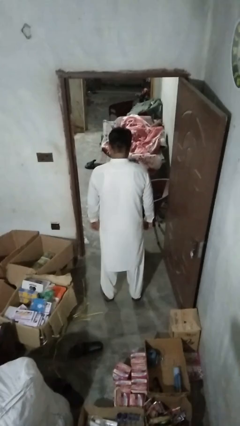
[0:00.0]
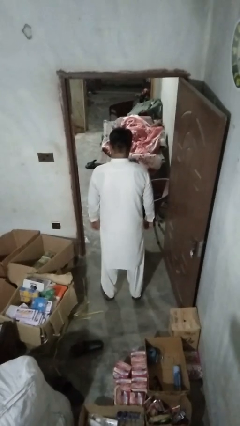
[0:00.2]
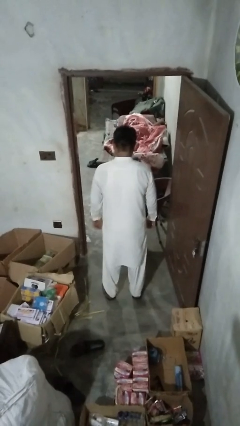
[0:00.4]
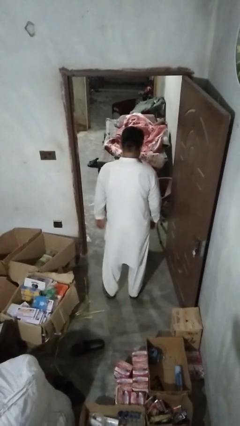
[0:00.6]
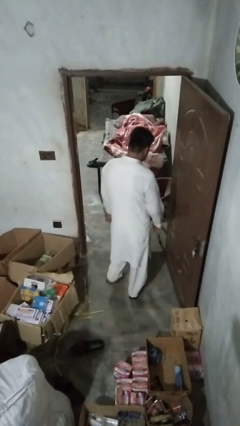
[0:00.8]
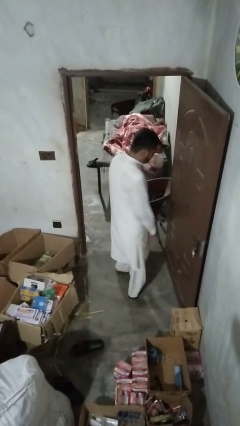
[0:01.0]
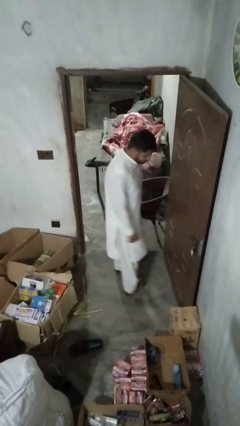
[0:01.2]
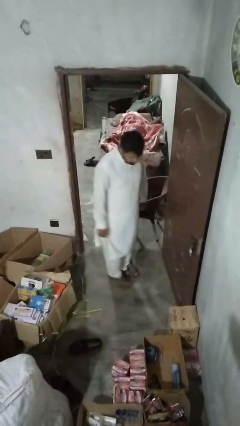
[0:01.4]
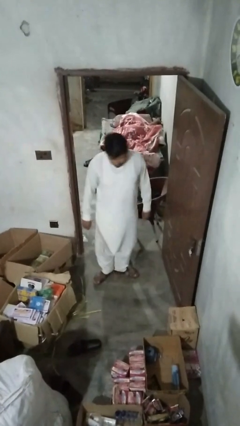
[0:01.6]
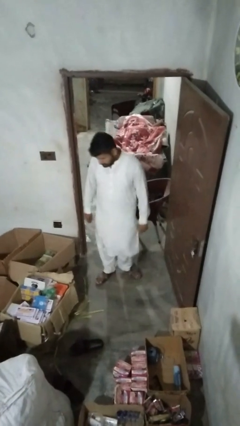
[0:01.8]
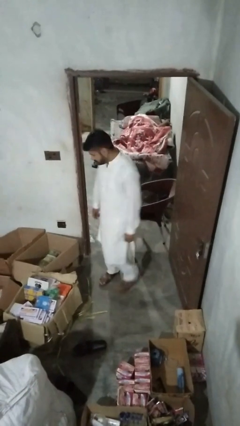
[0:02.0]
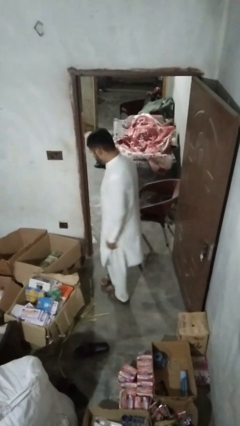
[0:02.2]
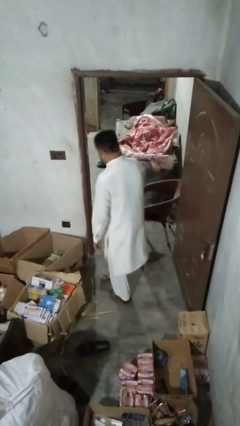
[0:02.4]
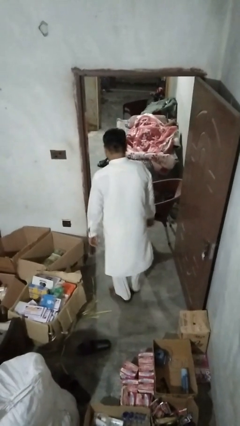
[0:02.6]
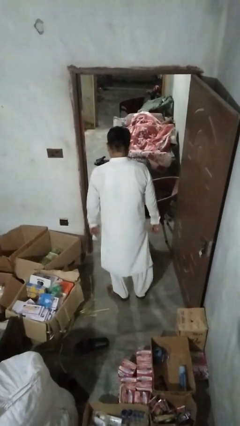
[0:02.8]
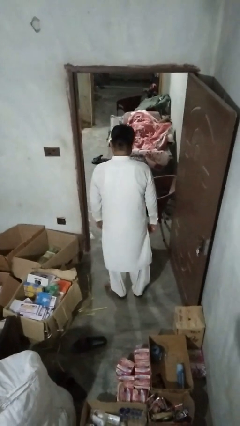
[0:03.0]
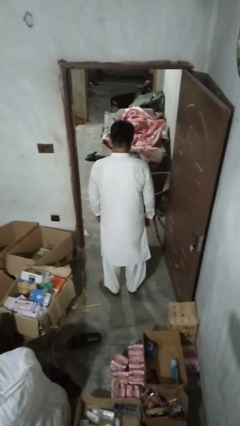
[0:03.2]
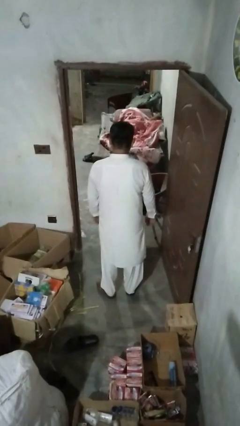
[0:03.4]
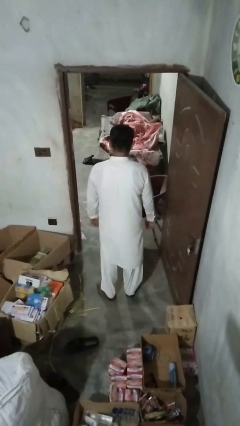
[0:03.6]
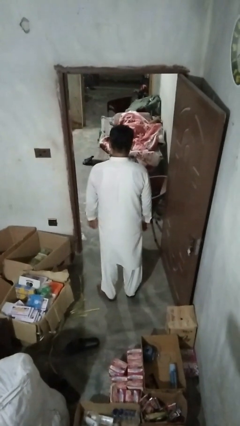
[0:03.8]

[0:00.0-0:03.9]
person twirls

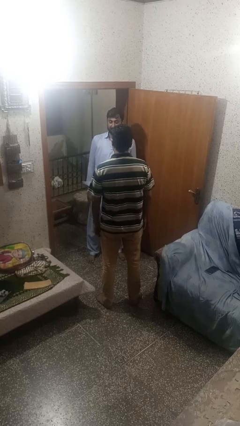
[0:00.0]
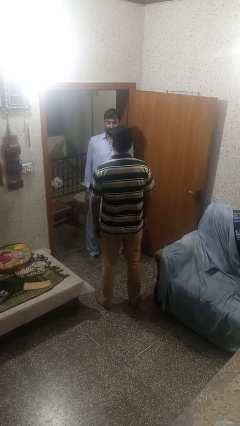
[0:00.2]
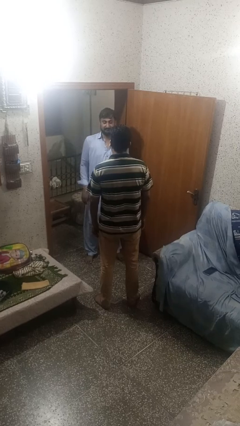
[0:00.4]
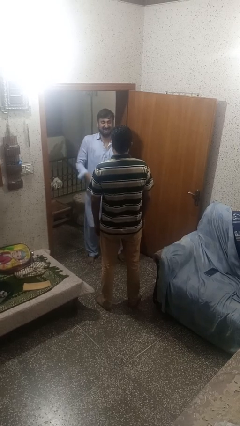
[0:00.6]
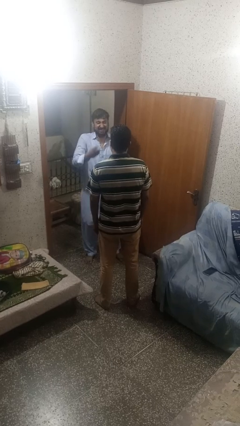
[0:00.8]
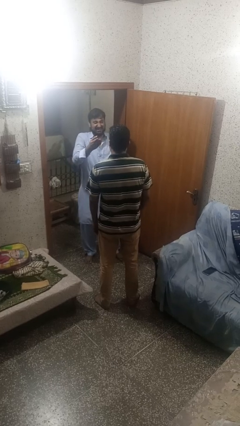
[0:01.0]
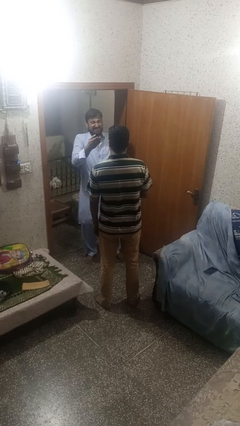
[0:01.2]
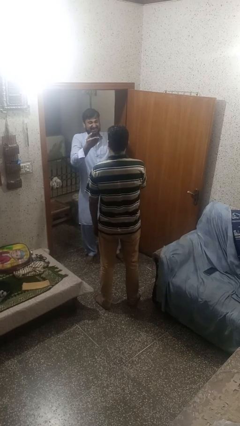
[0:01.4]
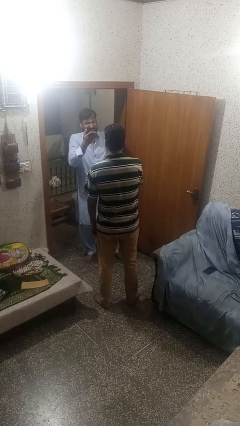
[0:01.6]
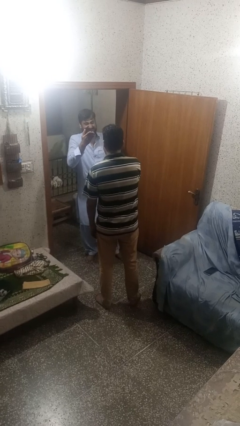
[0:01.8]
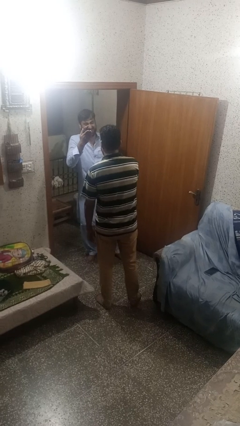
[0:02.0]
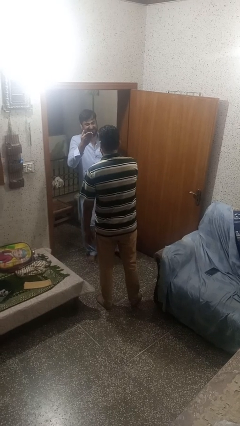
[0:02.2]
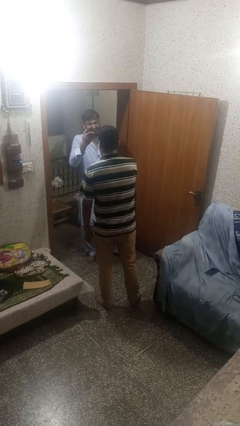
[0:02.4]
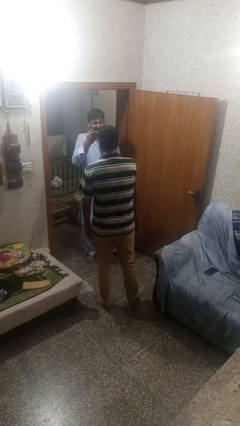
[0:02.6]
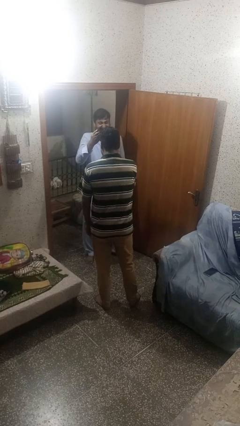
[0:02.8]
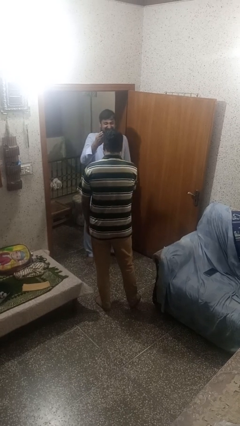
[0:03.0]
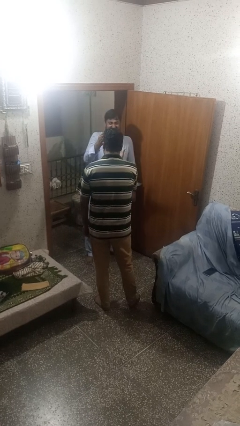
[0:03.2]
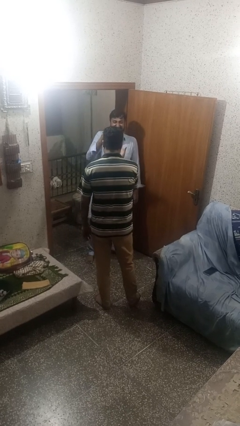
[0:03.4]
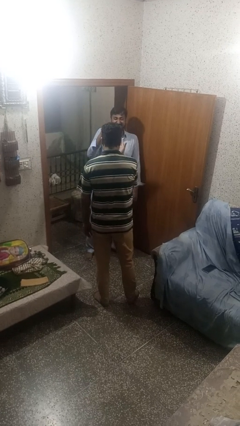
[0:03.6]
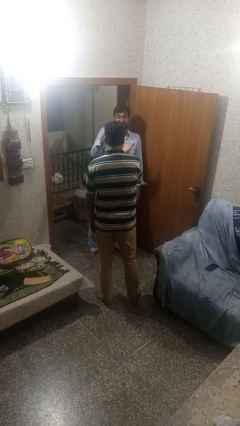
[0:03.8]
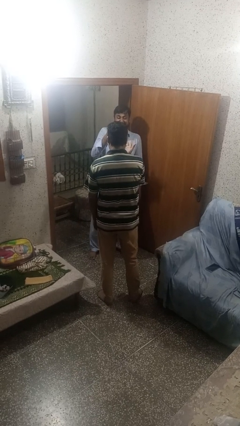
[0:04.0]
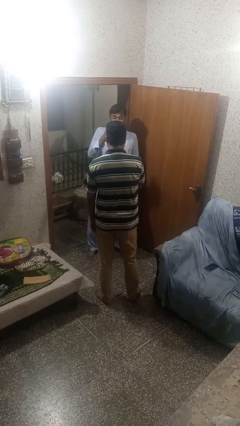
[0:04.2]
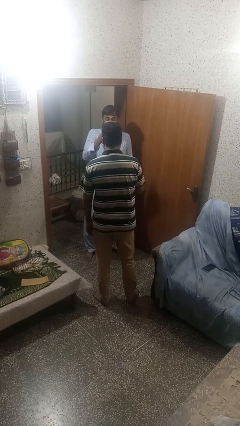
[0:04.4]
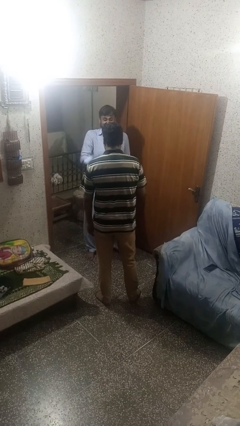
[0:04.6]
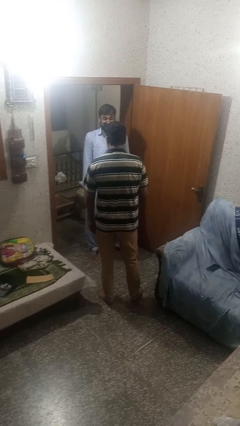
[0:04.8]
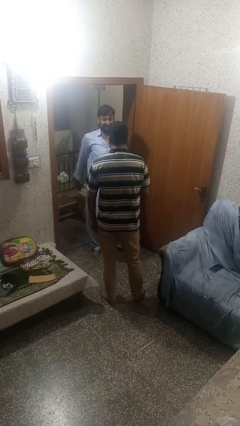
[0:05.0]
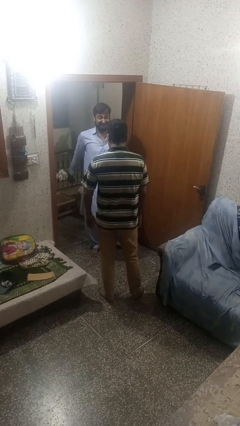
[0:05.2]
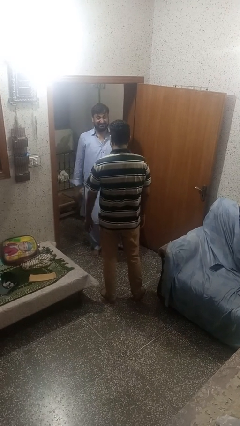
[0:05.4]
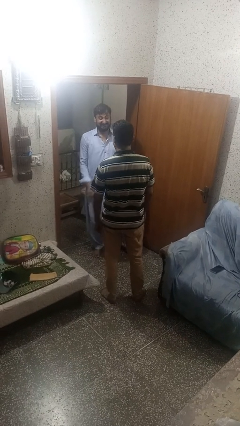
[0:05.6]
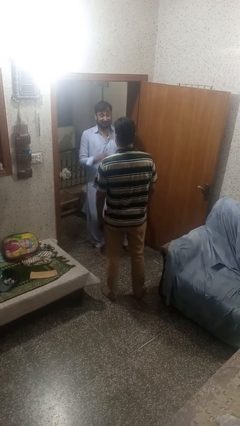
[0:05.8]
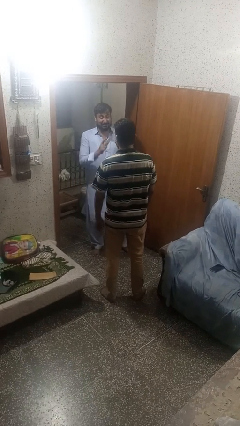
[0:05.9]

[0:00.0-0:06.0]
person laughs with person

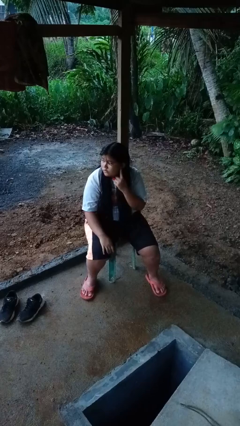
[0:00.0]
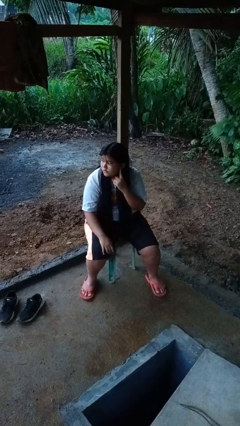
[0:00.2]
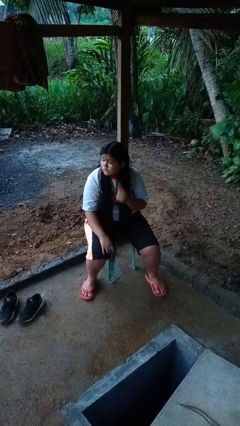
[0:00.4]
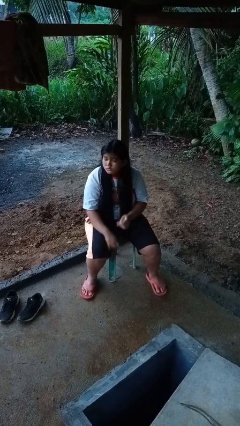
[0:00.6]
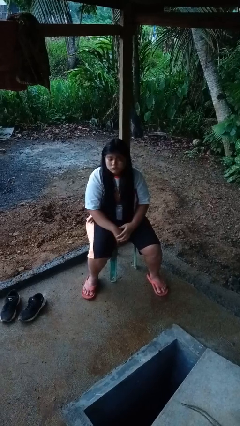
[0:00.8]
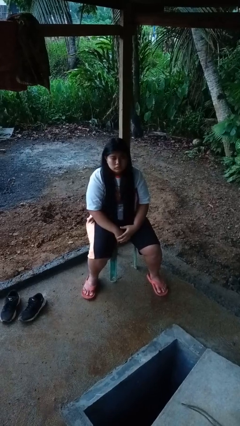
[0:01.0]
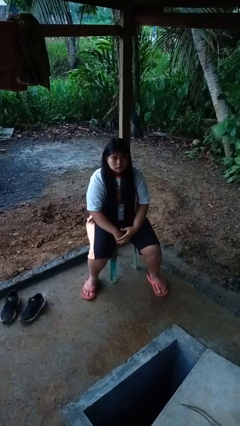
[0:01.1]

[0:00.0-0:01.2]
person gestures listen closely

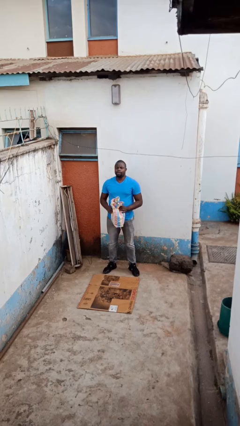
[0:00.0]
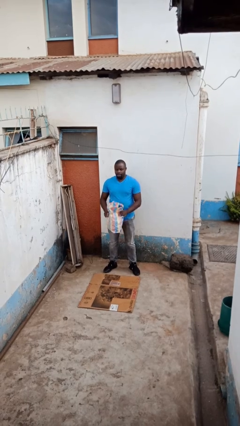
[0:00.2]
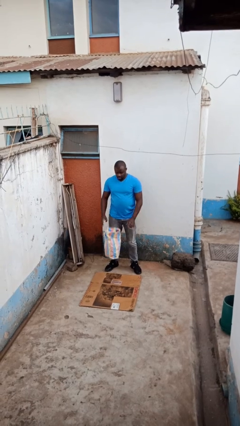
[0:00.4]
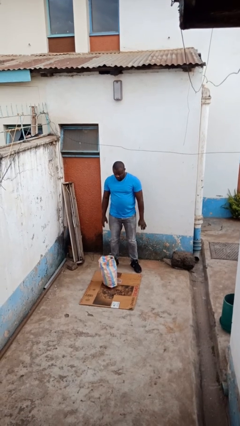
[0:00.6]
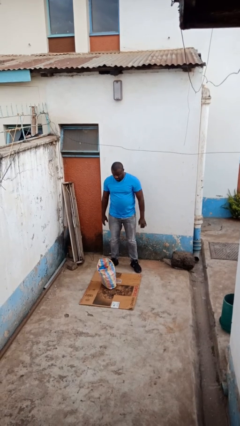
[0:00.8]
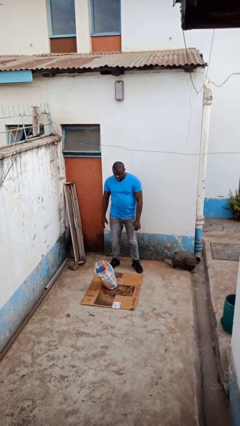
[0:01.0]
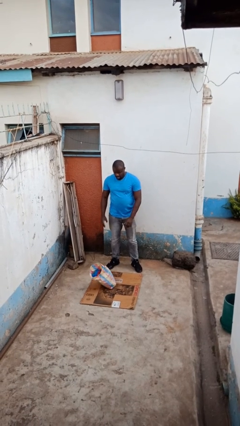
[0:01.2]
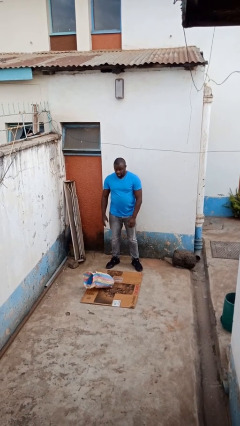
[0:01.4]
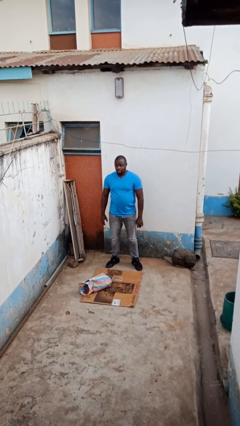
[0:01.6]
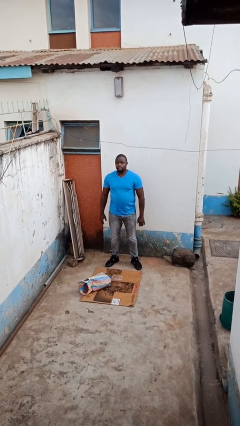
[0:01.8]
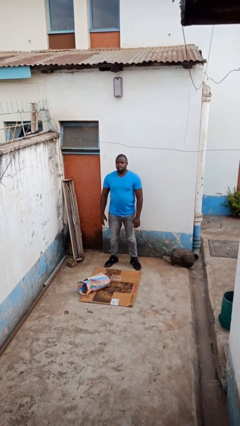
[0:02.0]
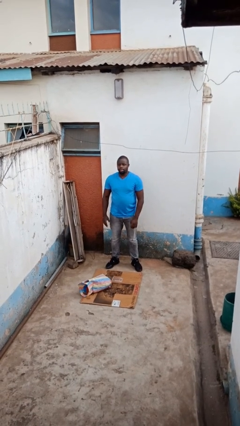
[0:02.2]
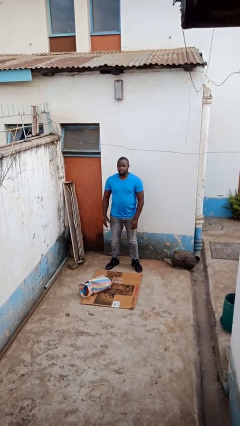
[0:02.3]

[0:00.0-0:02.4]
person drops object

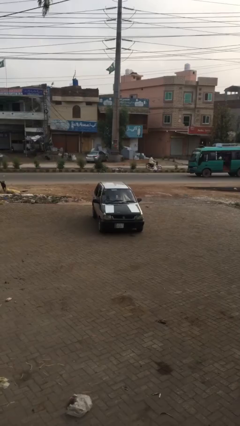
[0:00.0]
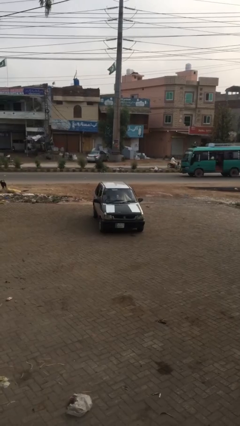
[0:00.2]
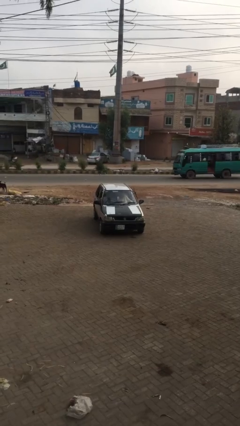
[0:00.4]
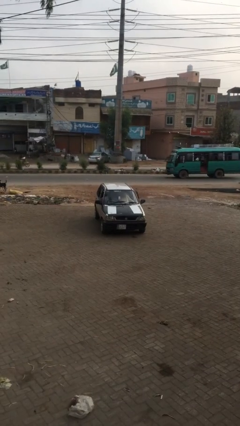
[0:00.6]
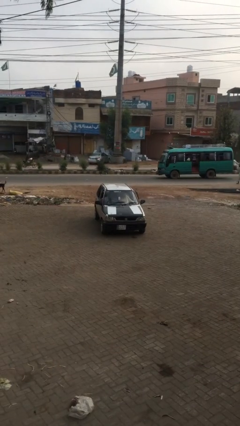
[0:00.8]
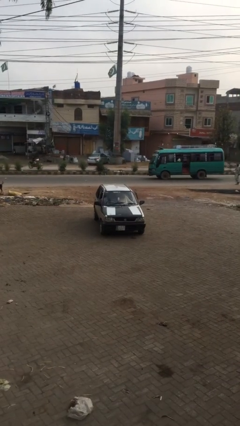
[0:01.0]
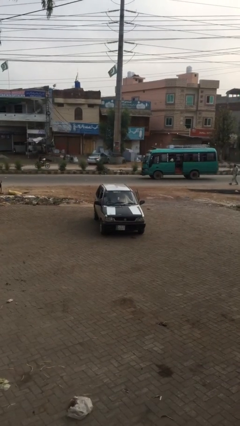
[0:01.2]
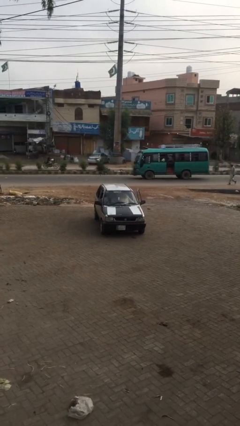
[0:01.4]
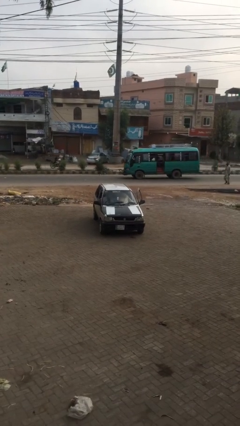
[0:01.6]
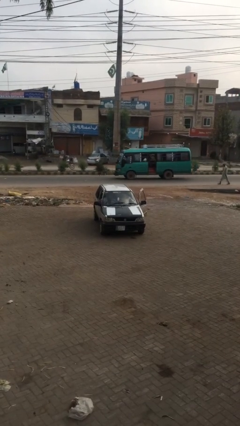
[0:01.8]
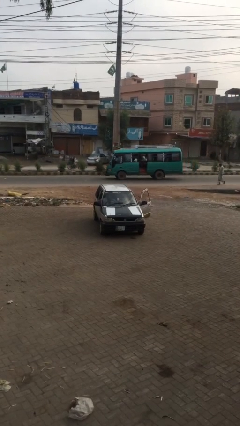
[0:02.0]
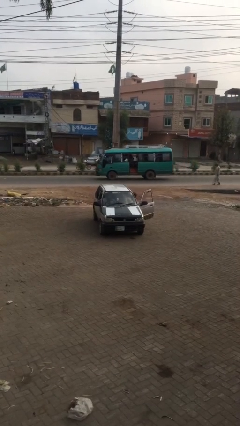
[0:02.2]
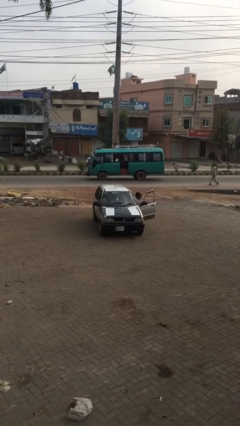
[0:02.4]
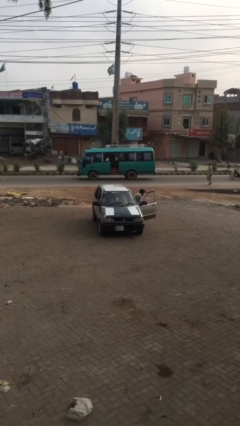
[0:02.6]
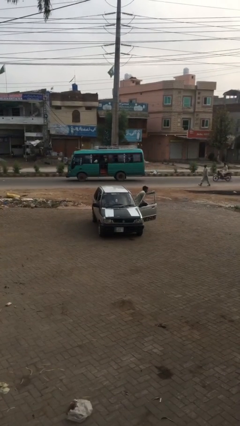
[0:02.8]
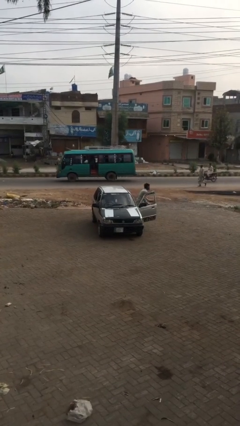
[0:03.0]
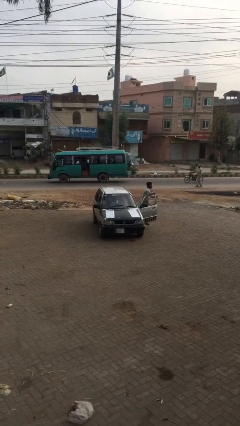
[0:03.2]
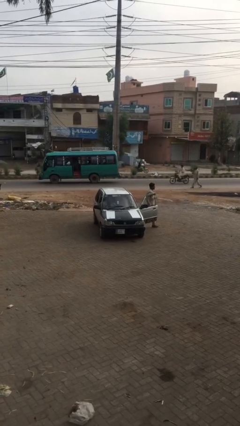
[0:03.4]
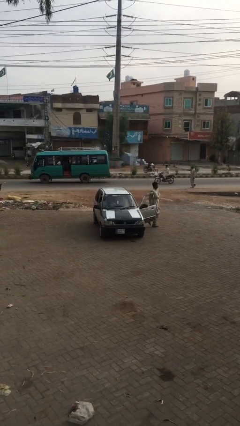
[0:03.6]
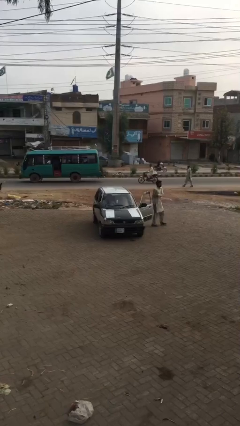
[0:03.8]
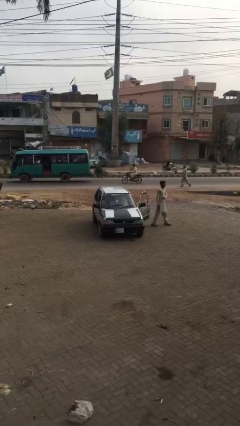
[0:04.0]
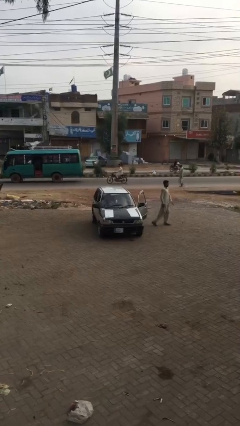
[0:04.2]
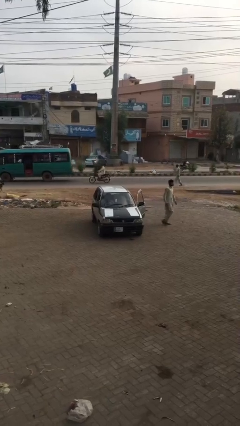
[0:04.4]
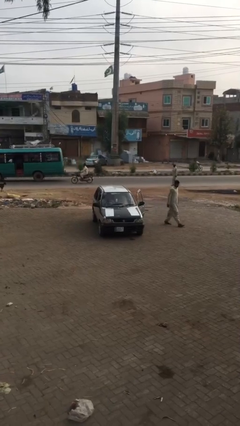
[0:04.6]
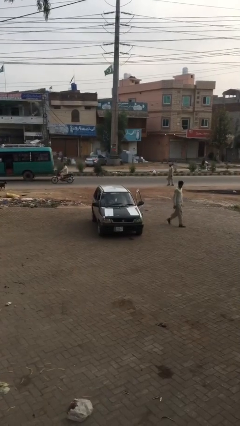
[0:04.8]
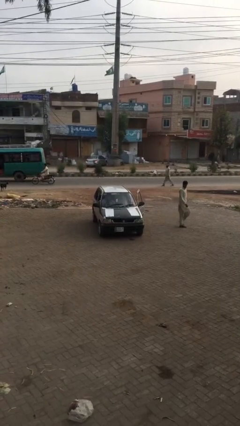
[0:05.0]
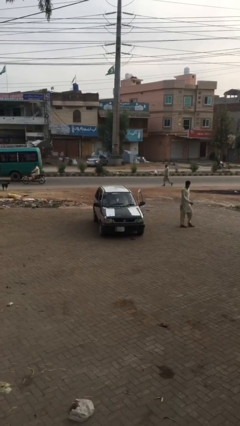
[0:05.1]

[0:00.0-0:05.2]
car drops off person
